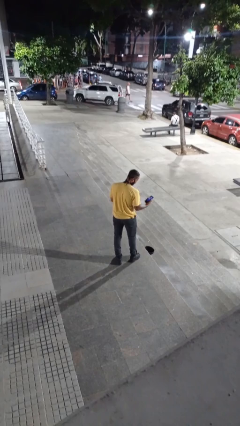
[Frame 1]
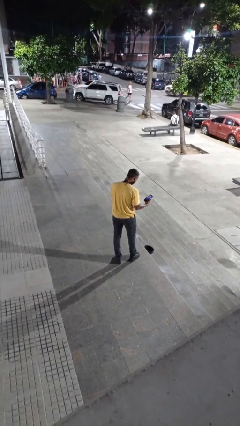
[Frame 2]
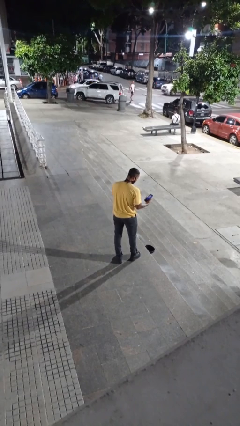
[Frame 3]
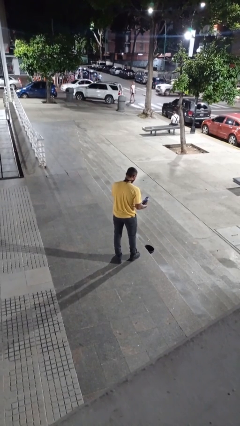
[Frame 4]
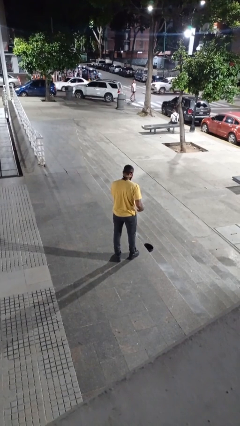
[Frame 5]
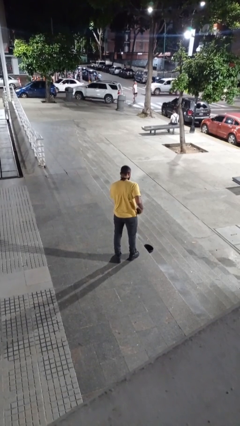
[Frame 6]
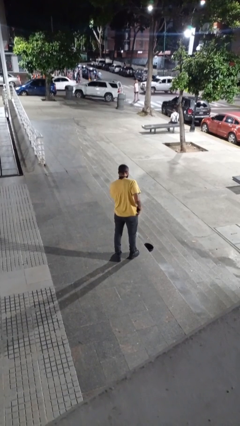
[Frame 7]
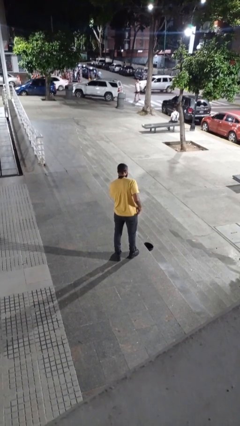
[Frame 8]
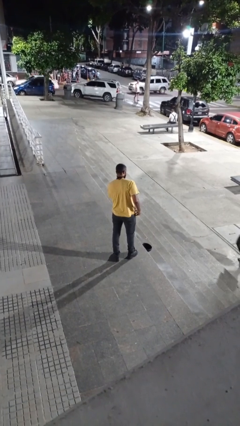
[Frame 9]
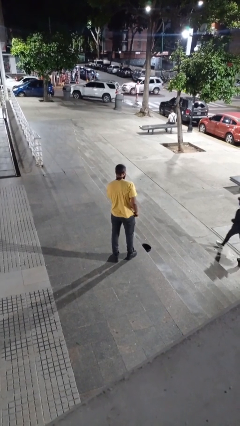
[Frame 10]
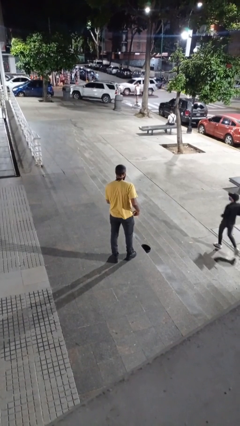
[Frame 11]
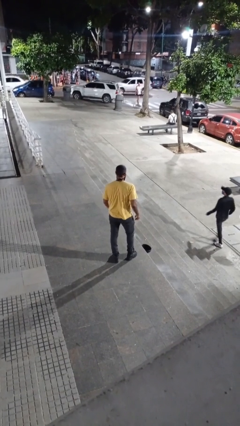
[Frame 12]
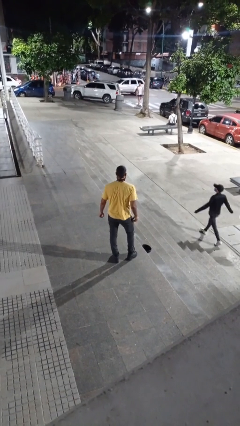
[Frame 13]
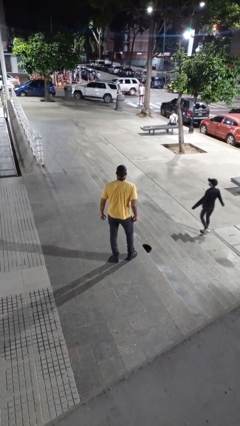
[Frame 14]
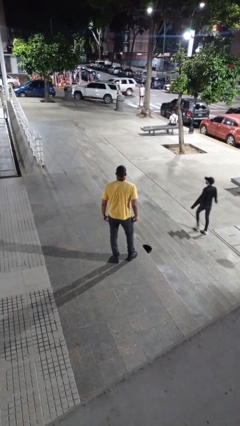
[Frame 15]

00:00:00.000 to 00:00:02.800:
person puts phone into pocket

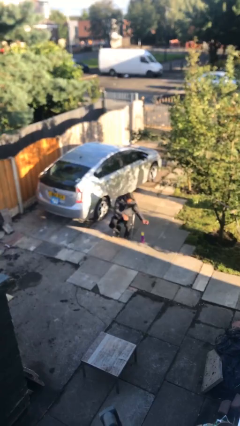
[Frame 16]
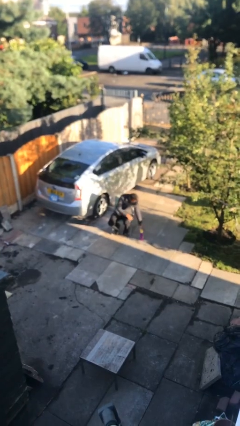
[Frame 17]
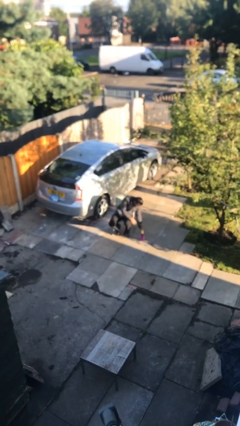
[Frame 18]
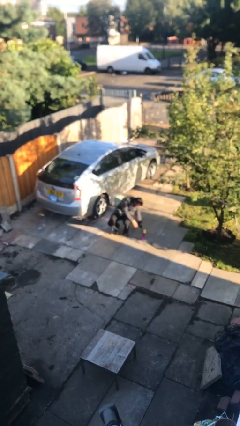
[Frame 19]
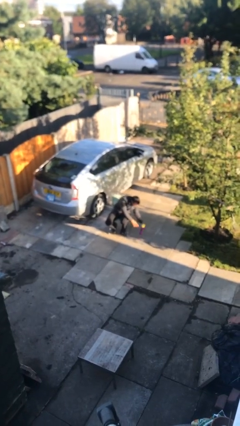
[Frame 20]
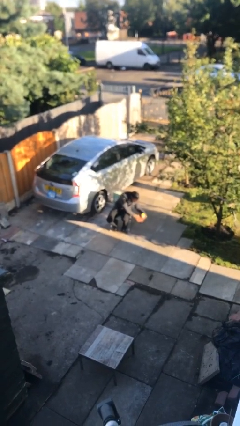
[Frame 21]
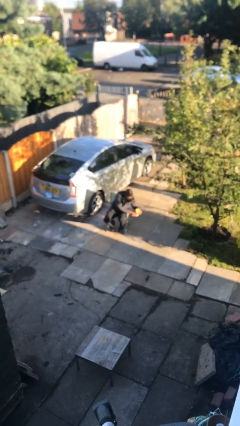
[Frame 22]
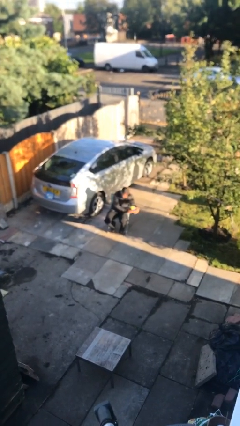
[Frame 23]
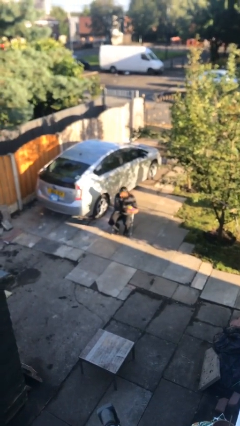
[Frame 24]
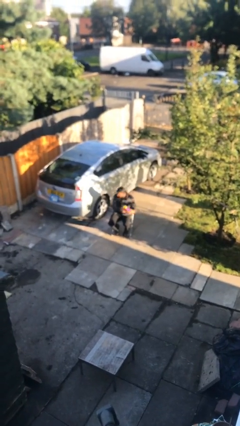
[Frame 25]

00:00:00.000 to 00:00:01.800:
person picks up object from floor

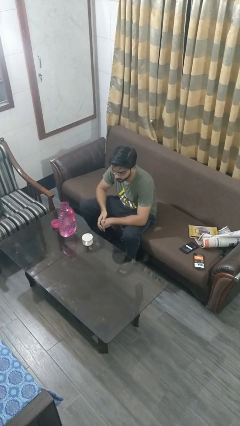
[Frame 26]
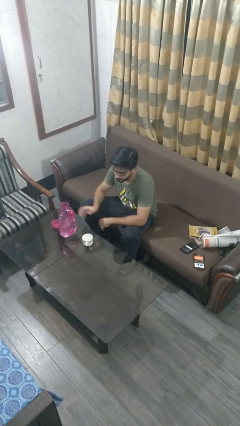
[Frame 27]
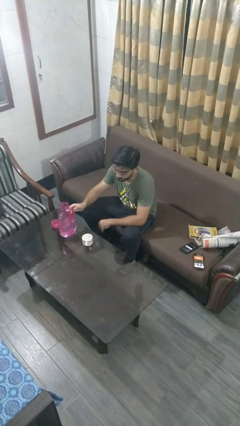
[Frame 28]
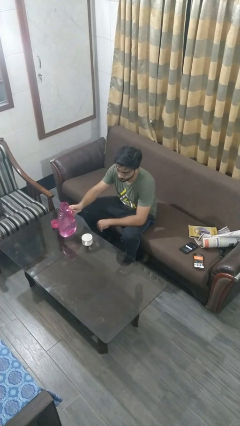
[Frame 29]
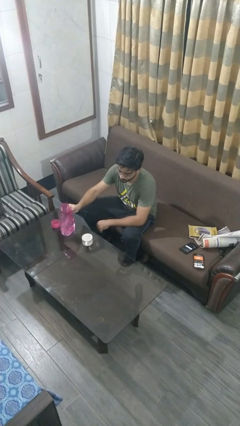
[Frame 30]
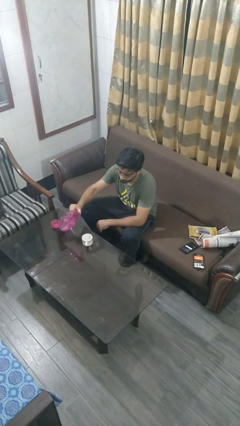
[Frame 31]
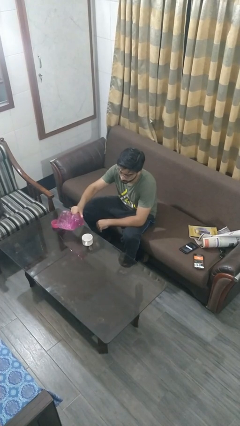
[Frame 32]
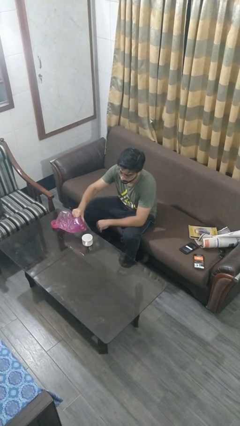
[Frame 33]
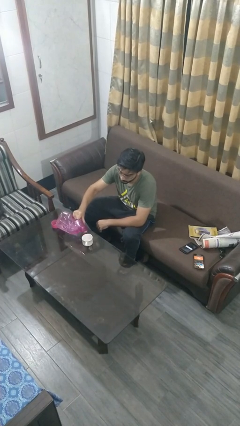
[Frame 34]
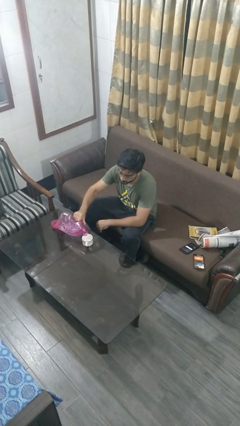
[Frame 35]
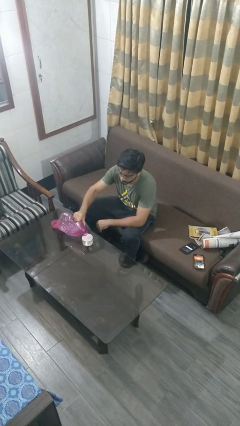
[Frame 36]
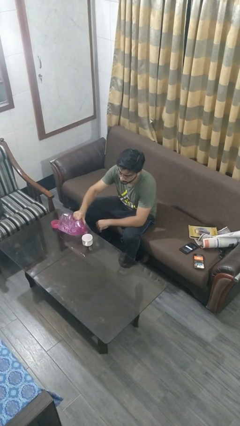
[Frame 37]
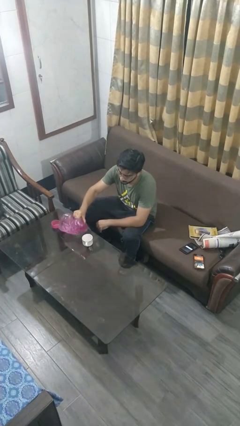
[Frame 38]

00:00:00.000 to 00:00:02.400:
person pours liquid into cup

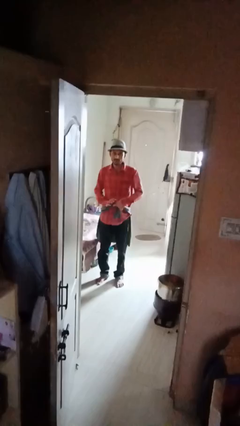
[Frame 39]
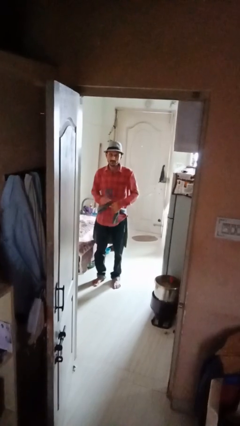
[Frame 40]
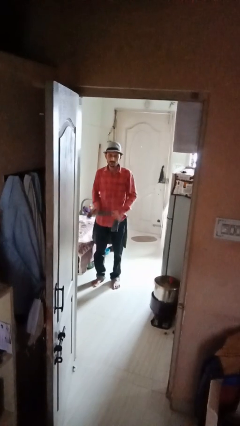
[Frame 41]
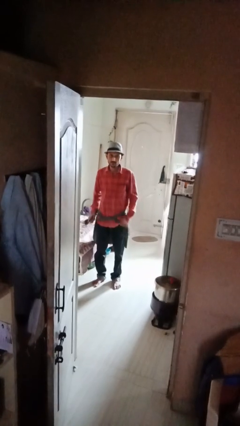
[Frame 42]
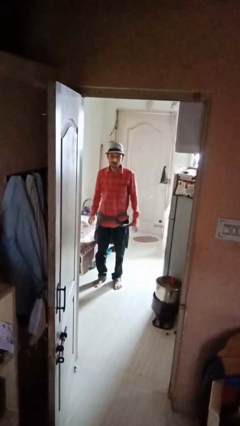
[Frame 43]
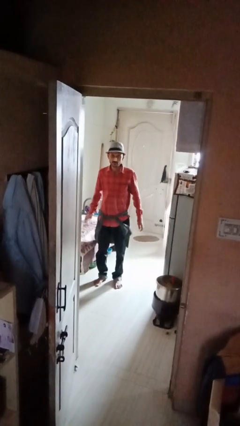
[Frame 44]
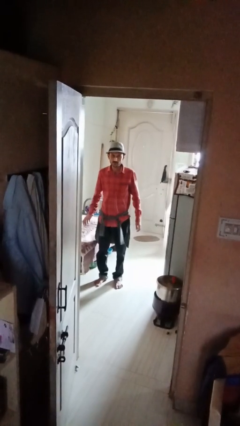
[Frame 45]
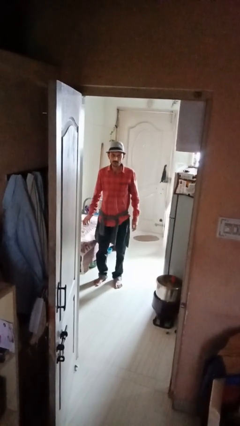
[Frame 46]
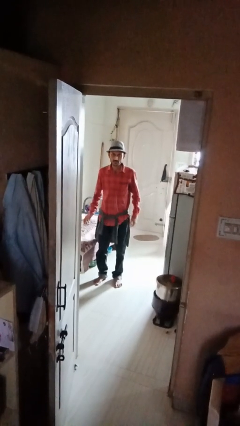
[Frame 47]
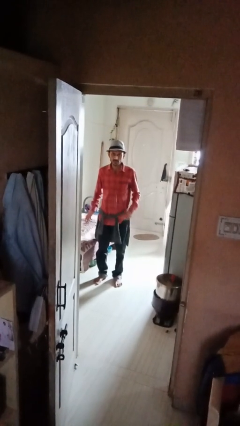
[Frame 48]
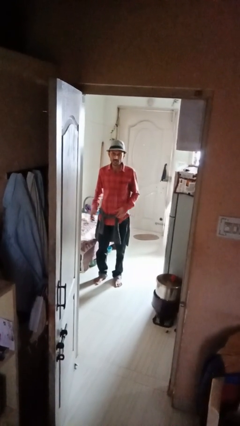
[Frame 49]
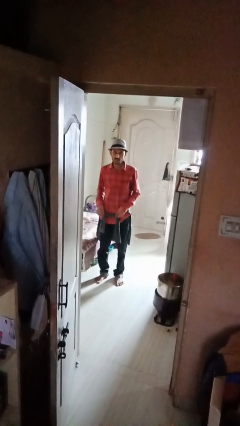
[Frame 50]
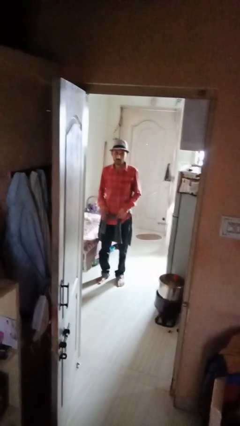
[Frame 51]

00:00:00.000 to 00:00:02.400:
person ties jacket around waist

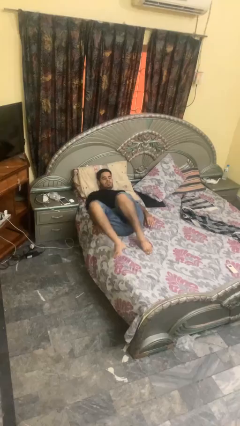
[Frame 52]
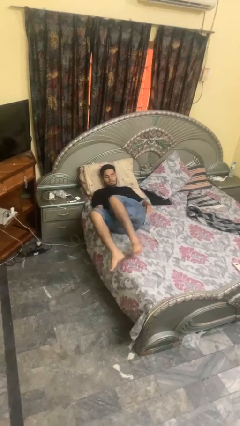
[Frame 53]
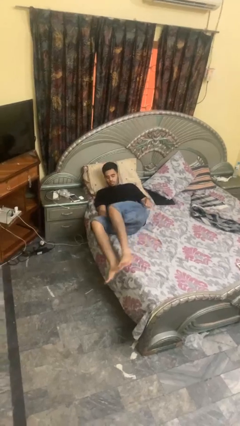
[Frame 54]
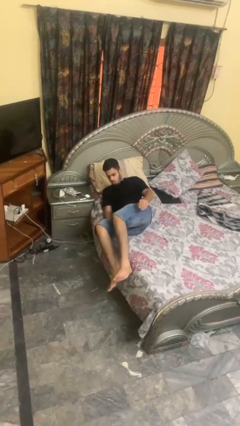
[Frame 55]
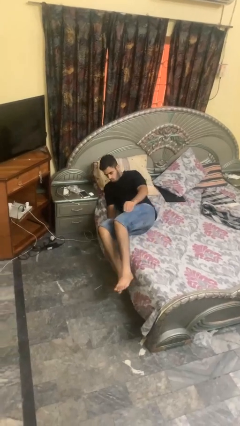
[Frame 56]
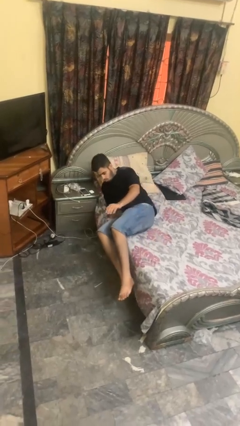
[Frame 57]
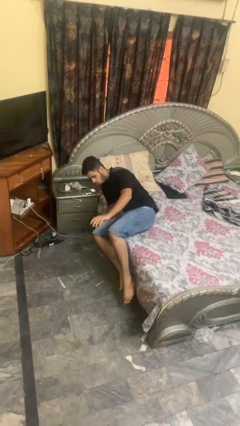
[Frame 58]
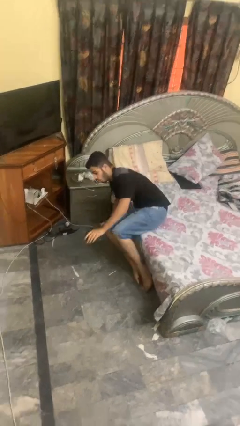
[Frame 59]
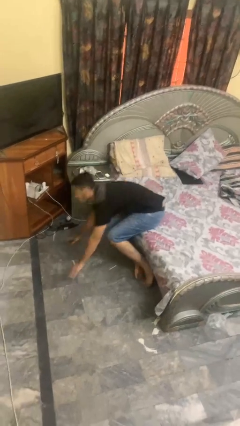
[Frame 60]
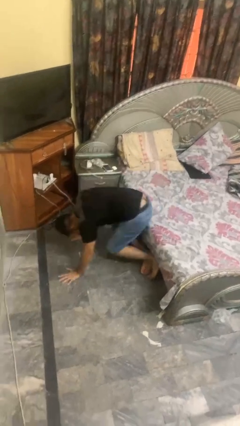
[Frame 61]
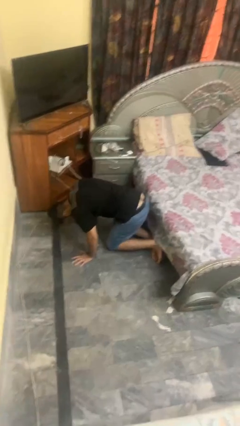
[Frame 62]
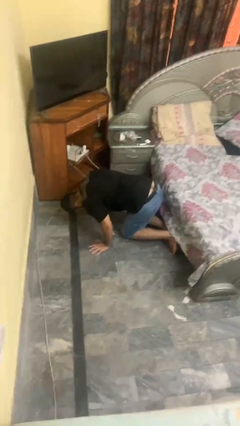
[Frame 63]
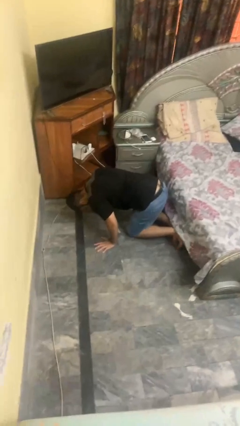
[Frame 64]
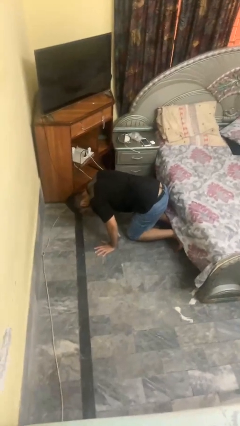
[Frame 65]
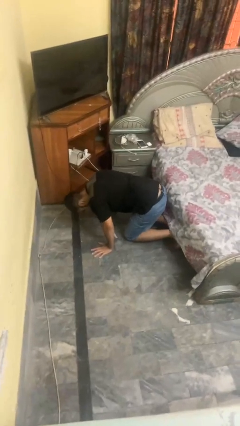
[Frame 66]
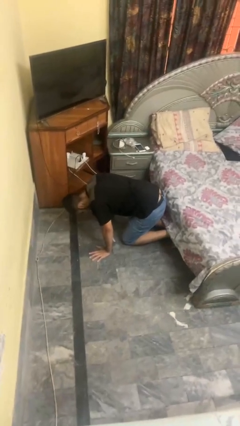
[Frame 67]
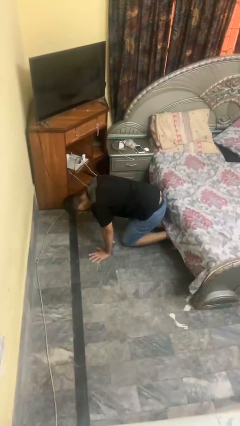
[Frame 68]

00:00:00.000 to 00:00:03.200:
person falls from bed

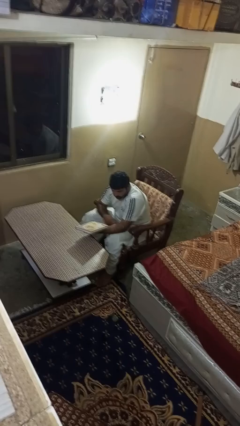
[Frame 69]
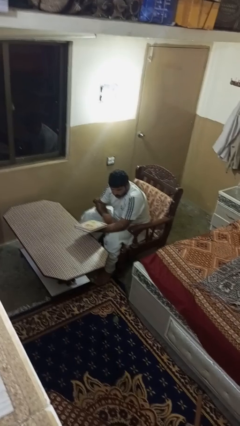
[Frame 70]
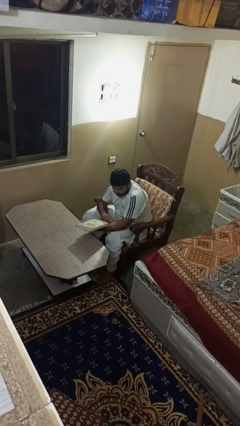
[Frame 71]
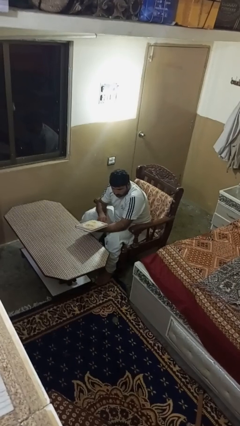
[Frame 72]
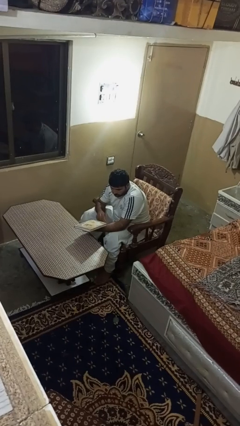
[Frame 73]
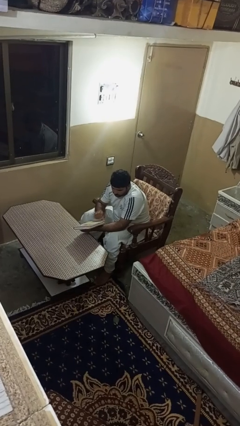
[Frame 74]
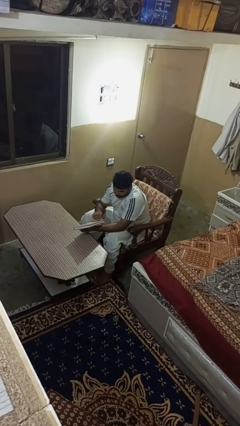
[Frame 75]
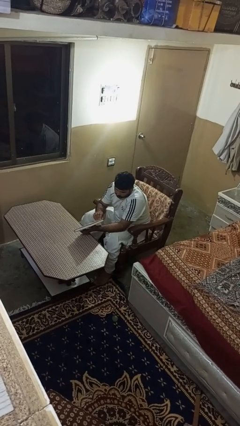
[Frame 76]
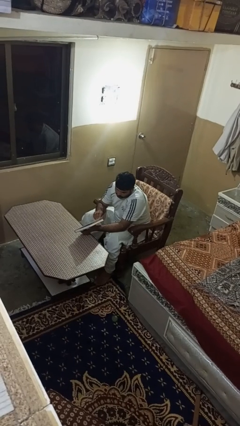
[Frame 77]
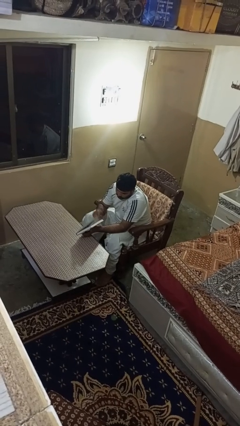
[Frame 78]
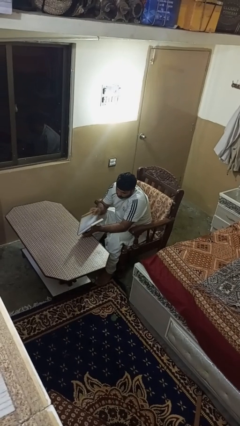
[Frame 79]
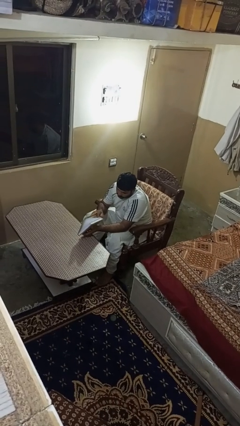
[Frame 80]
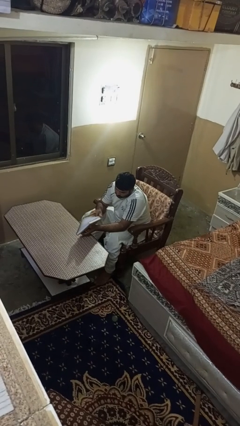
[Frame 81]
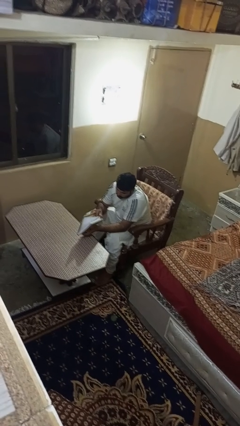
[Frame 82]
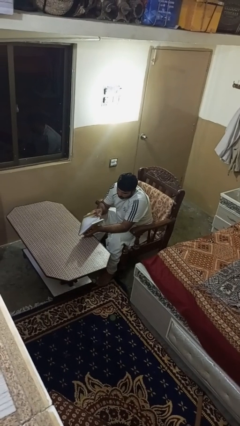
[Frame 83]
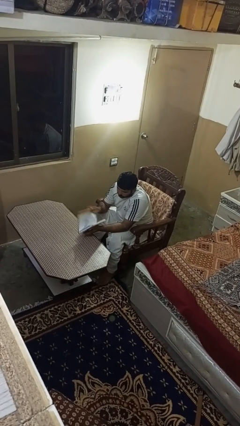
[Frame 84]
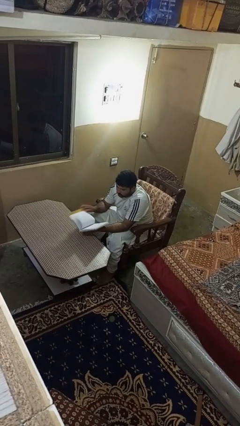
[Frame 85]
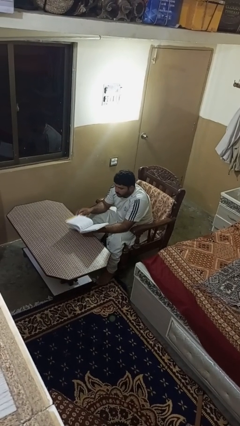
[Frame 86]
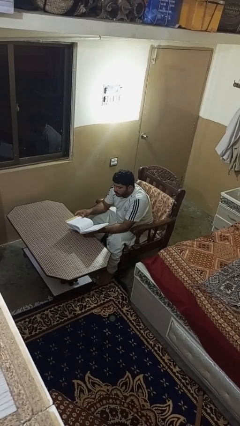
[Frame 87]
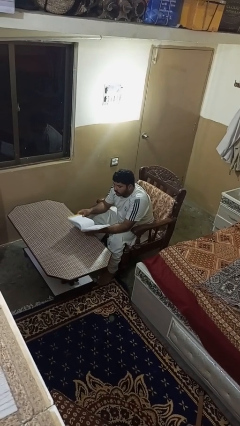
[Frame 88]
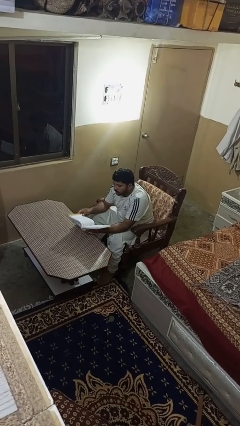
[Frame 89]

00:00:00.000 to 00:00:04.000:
person reads book

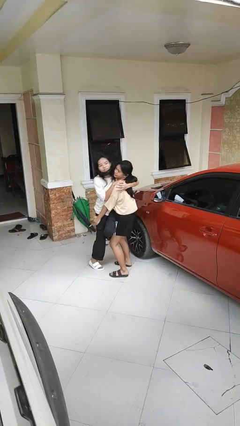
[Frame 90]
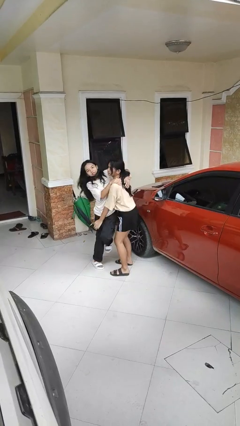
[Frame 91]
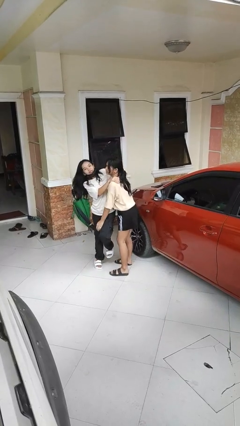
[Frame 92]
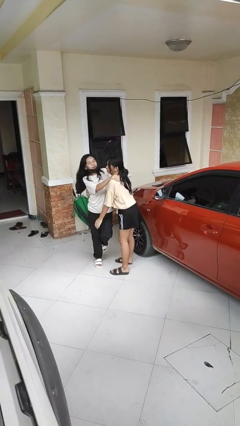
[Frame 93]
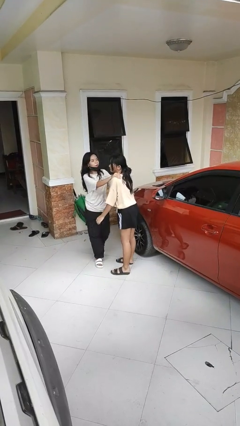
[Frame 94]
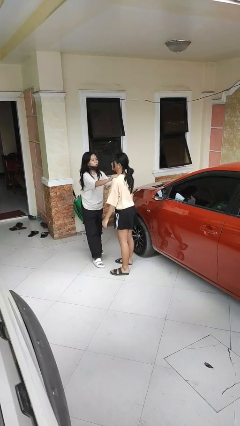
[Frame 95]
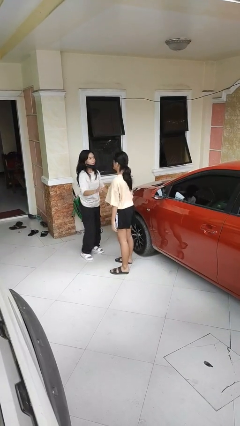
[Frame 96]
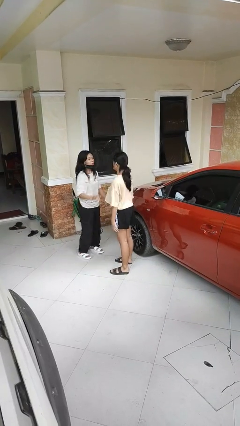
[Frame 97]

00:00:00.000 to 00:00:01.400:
person puts down person
